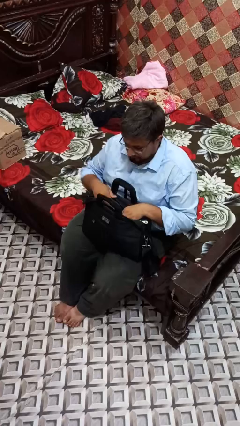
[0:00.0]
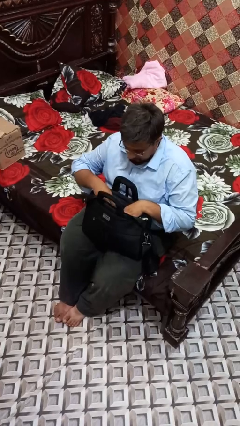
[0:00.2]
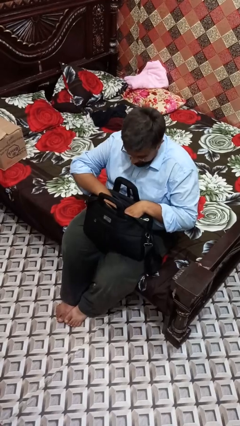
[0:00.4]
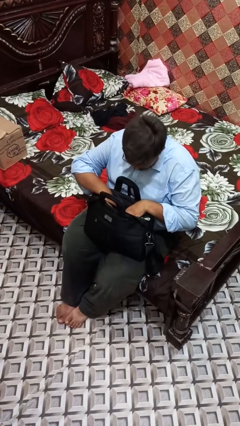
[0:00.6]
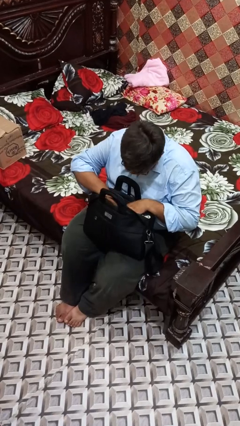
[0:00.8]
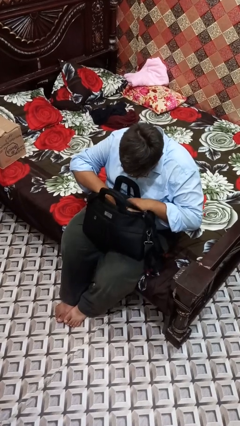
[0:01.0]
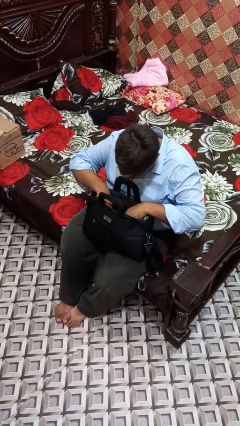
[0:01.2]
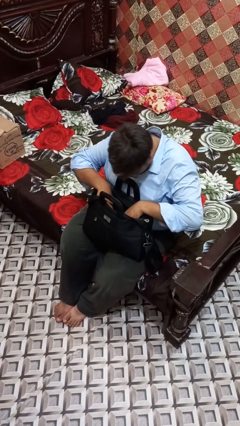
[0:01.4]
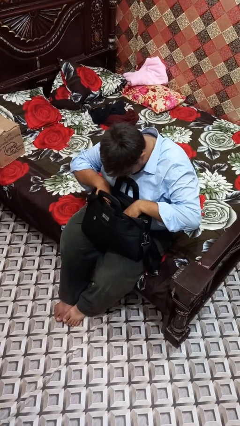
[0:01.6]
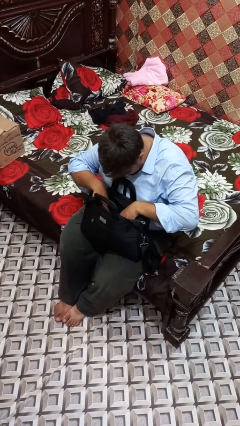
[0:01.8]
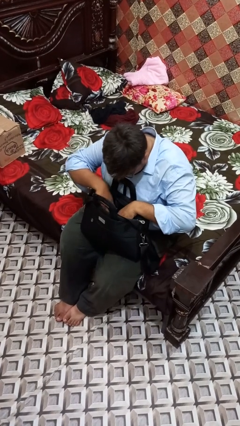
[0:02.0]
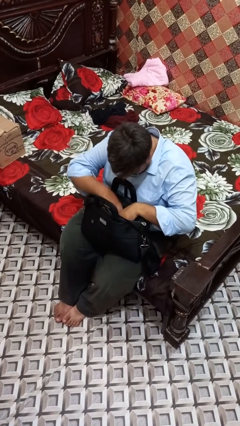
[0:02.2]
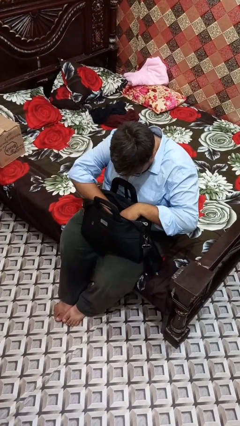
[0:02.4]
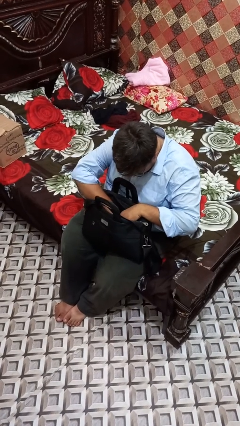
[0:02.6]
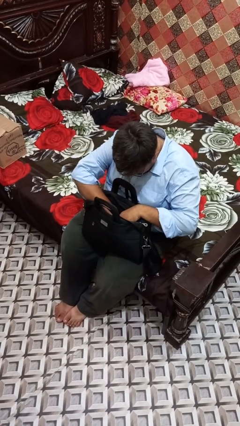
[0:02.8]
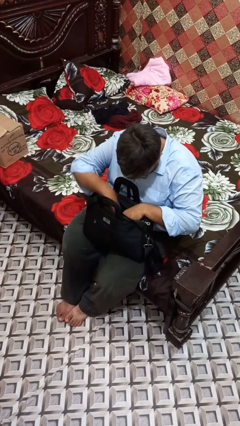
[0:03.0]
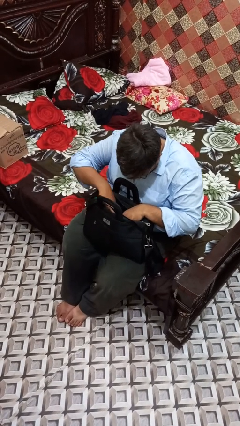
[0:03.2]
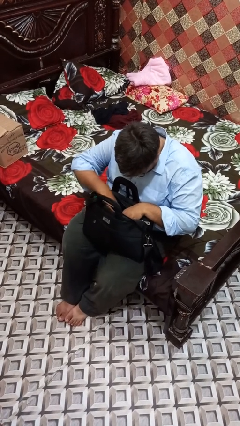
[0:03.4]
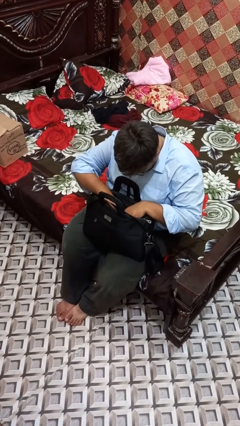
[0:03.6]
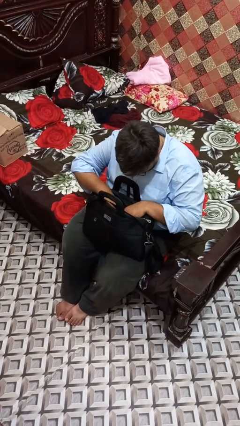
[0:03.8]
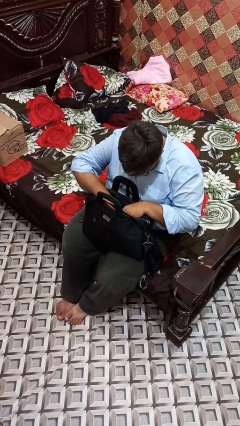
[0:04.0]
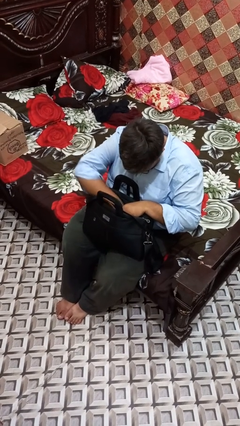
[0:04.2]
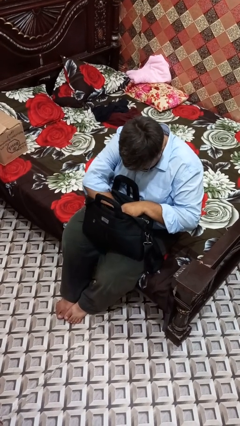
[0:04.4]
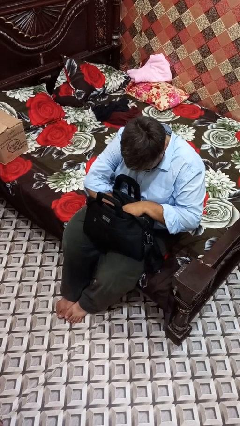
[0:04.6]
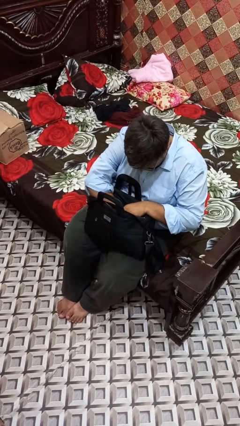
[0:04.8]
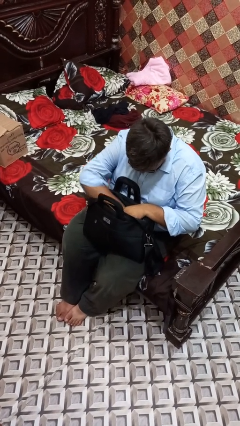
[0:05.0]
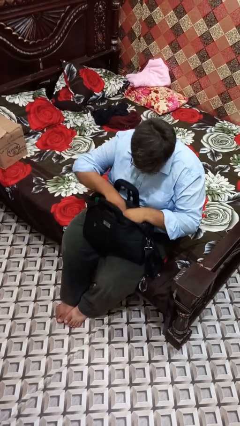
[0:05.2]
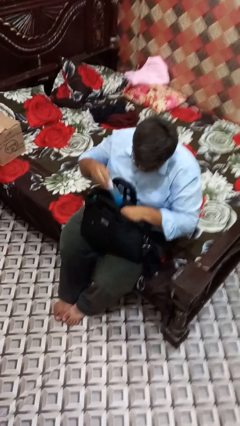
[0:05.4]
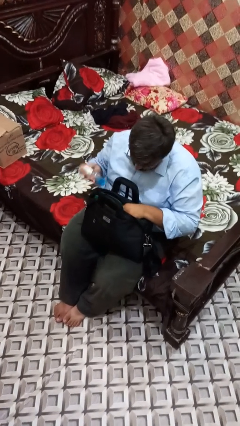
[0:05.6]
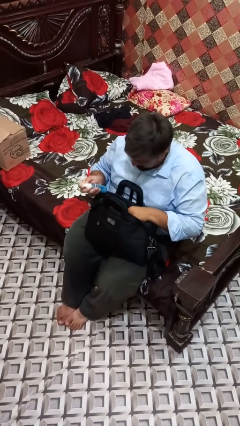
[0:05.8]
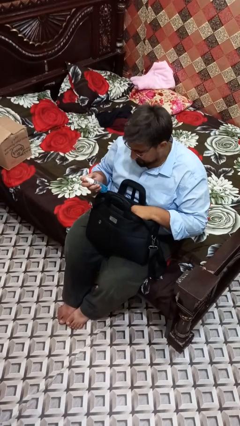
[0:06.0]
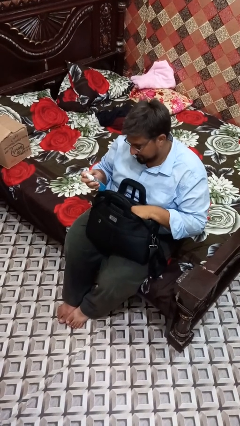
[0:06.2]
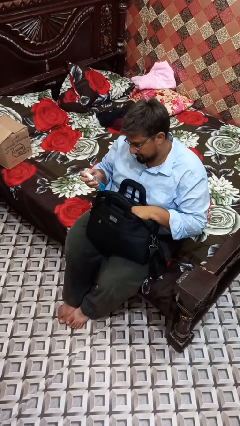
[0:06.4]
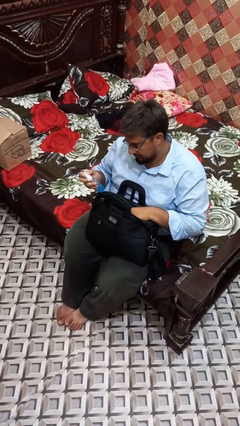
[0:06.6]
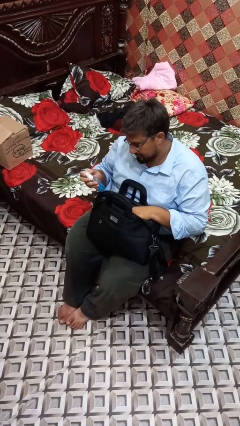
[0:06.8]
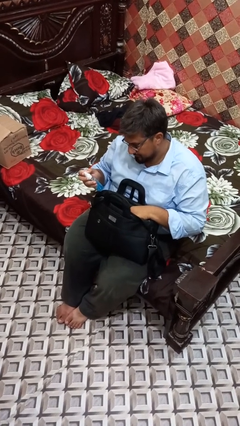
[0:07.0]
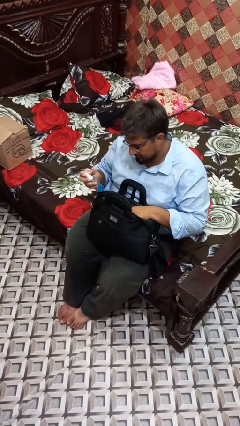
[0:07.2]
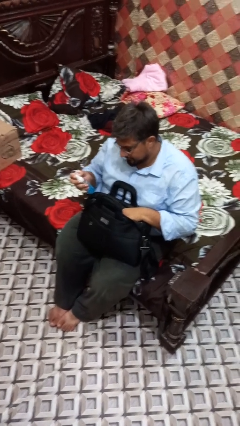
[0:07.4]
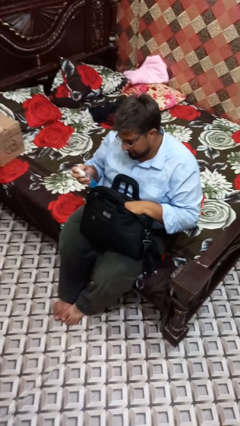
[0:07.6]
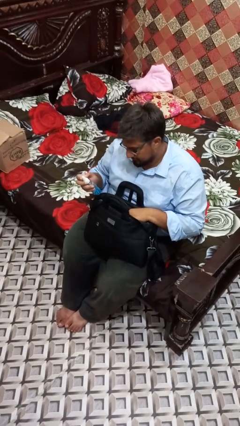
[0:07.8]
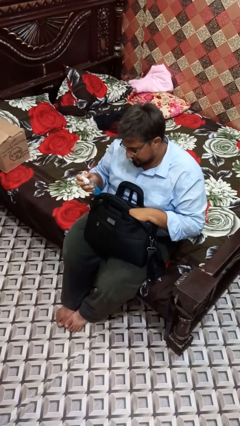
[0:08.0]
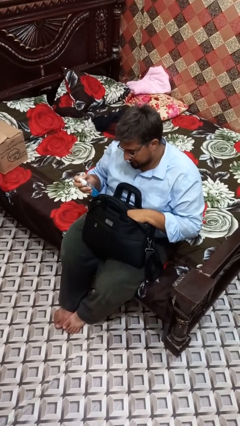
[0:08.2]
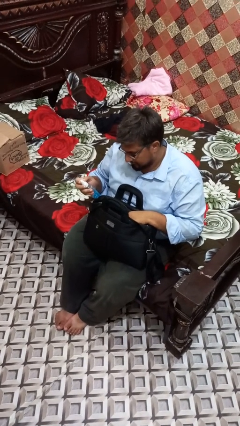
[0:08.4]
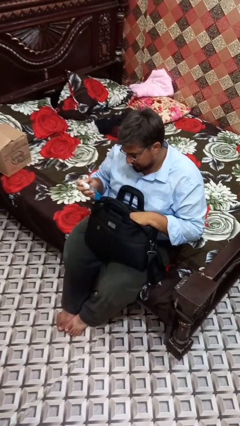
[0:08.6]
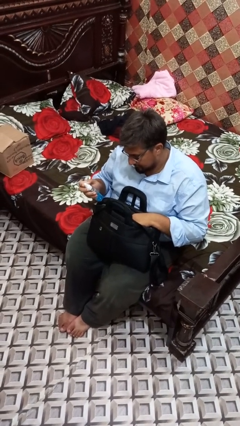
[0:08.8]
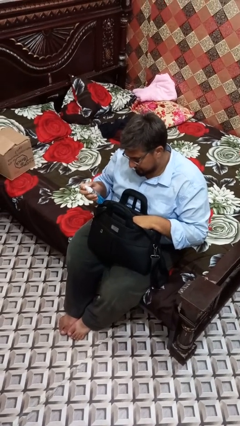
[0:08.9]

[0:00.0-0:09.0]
person searches in bag

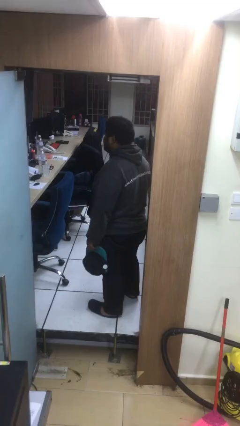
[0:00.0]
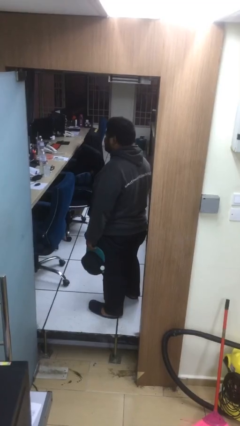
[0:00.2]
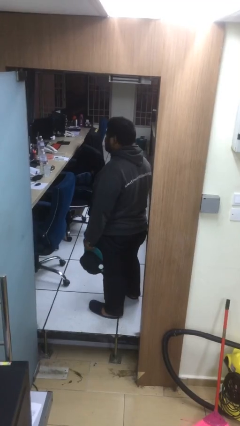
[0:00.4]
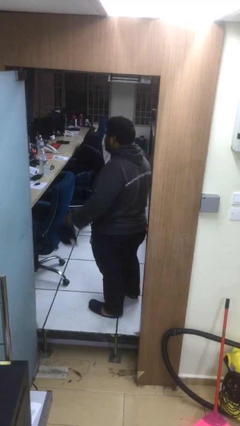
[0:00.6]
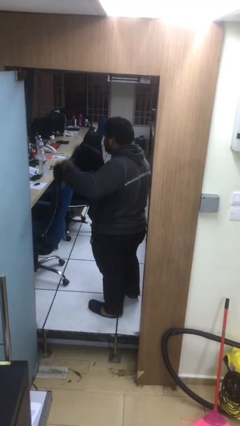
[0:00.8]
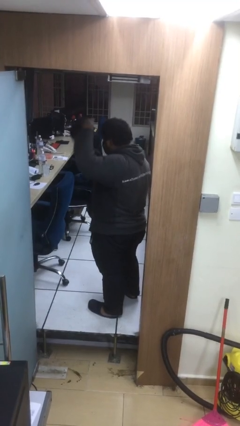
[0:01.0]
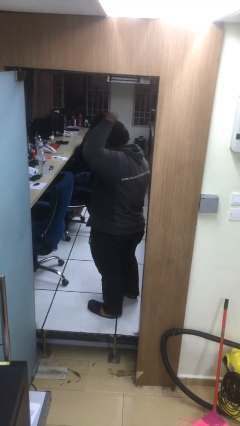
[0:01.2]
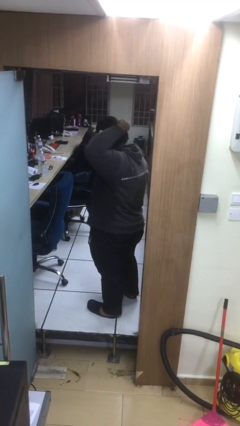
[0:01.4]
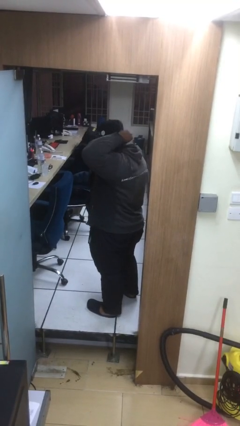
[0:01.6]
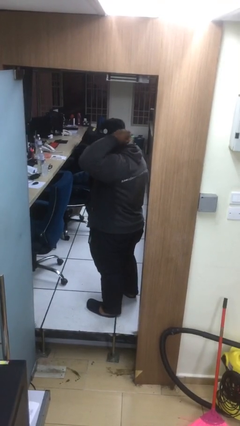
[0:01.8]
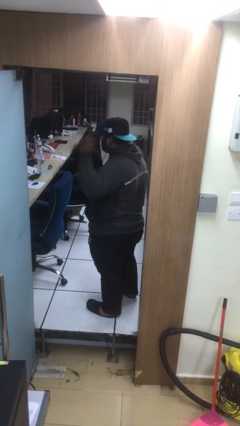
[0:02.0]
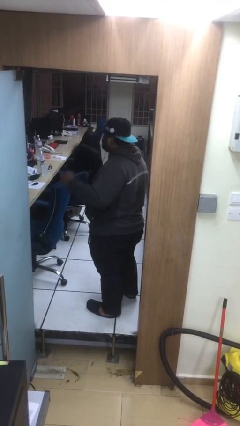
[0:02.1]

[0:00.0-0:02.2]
person puts on hat

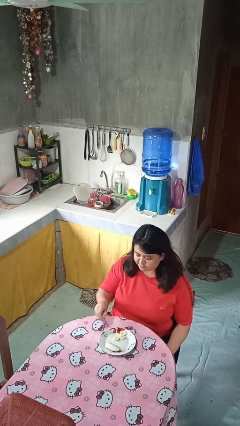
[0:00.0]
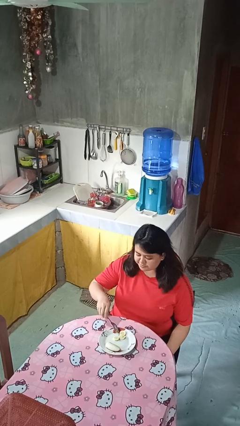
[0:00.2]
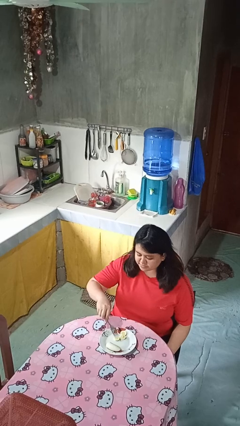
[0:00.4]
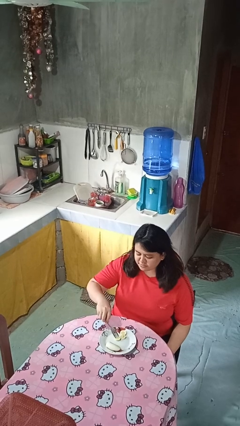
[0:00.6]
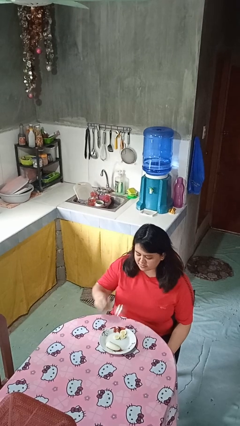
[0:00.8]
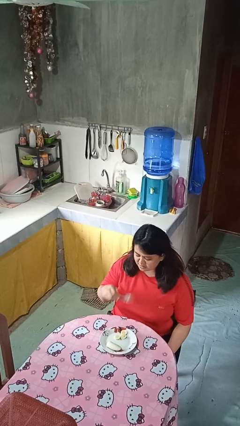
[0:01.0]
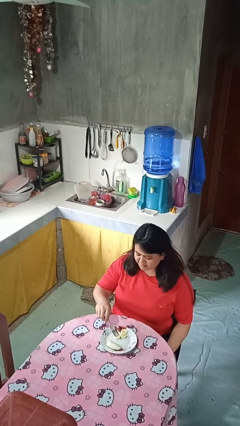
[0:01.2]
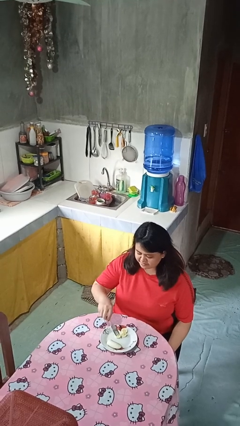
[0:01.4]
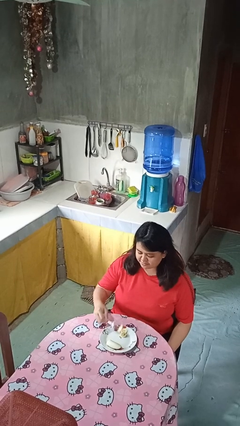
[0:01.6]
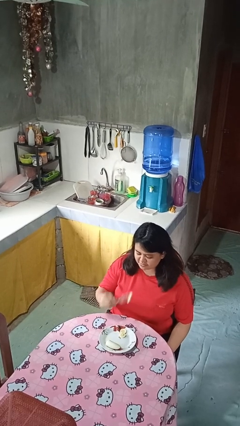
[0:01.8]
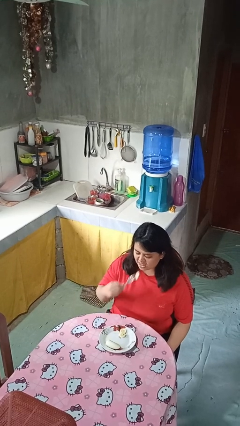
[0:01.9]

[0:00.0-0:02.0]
person eats with utensil

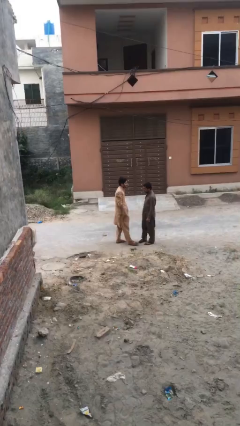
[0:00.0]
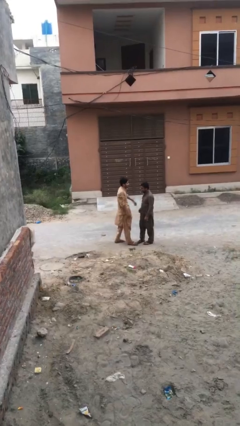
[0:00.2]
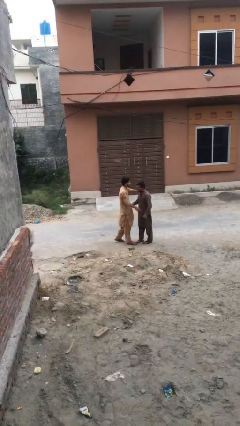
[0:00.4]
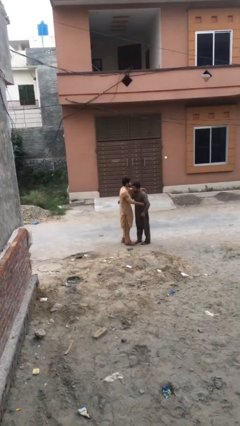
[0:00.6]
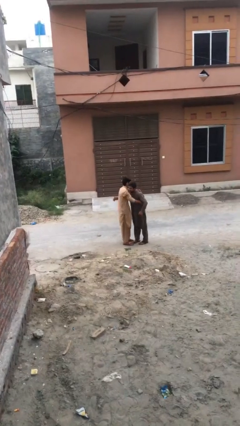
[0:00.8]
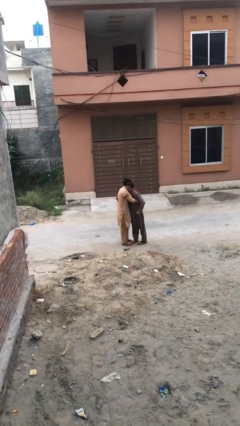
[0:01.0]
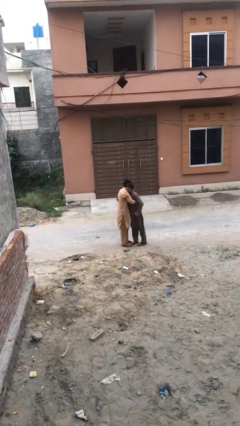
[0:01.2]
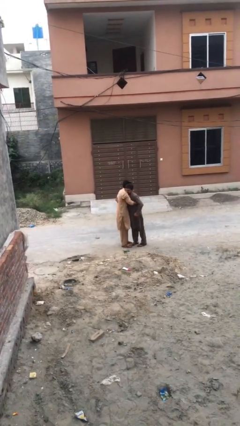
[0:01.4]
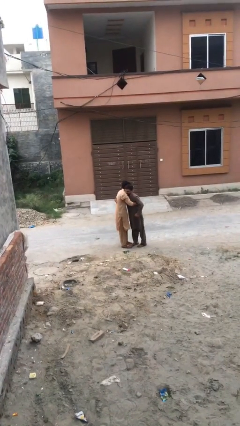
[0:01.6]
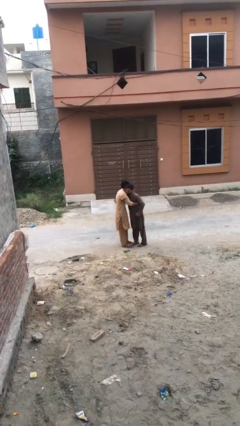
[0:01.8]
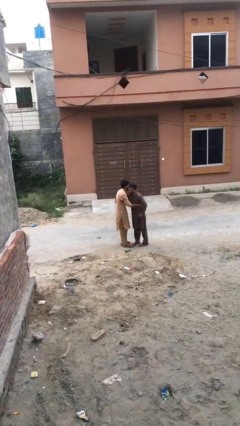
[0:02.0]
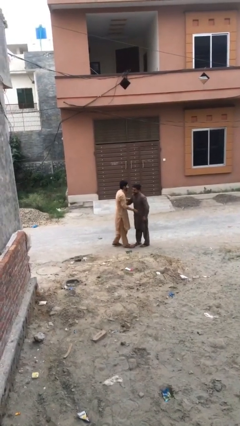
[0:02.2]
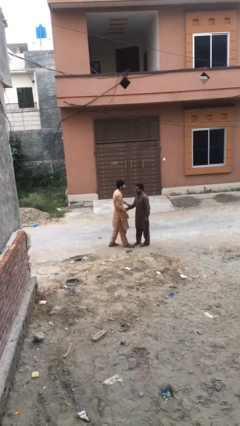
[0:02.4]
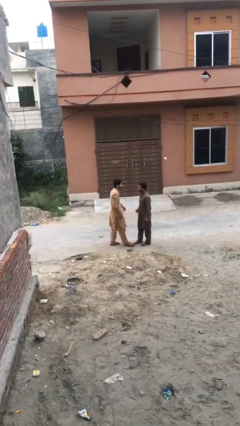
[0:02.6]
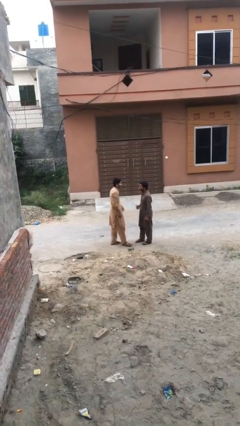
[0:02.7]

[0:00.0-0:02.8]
person embraces person

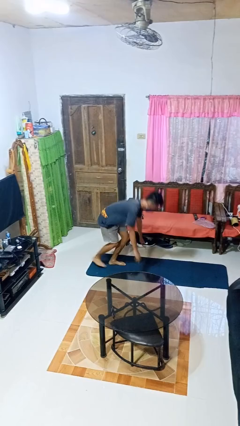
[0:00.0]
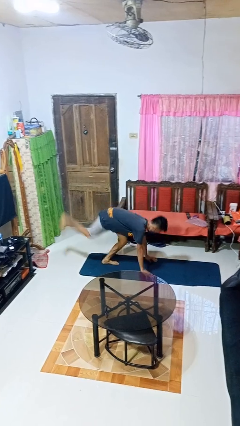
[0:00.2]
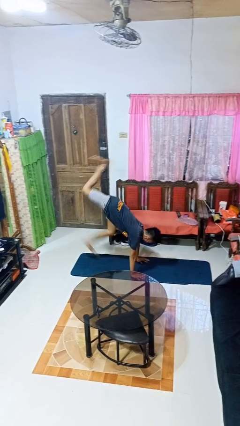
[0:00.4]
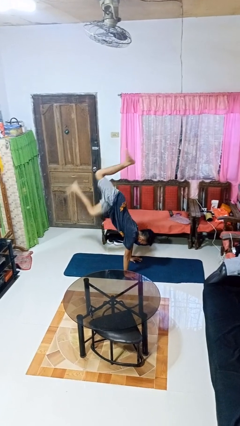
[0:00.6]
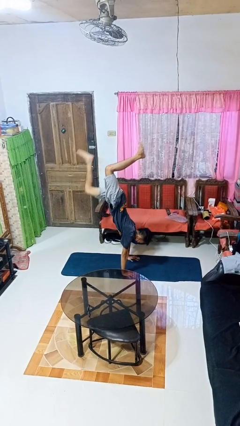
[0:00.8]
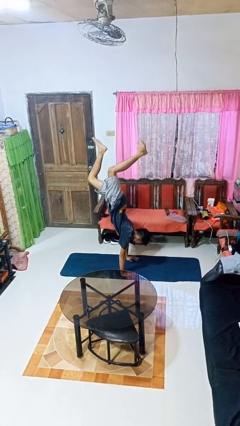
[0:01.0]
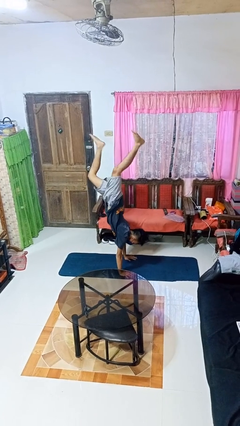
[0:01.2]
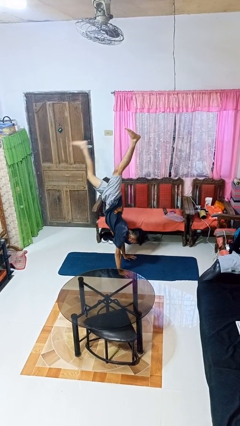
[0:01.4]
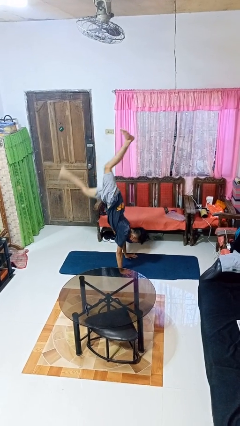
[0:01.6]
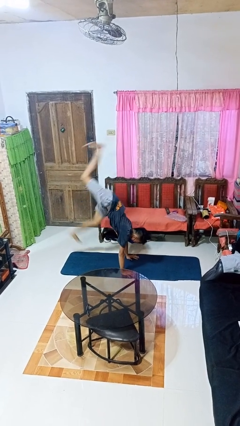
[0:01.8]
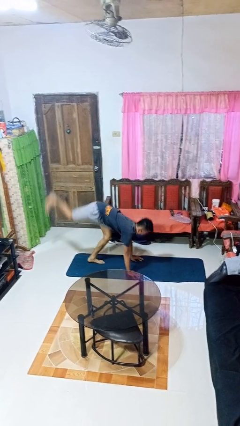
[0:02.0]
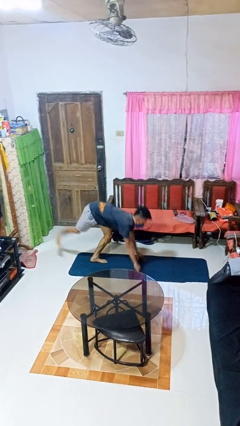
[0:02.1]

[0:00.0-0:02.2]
person handstand
